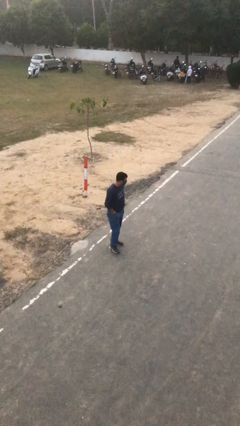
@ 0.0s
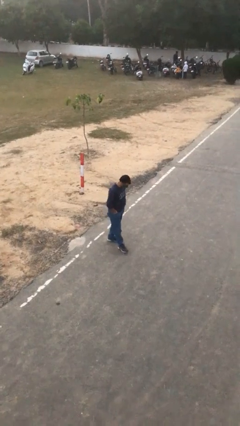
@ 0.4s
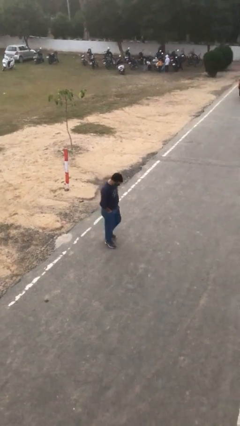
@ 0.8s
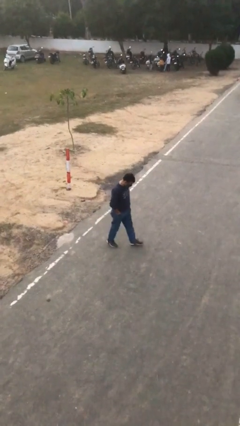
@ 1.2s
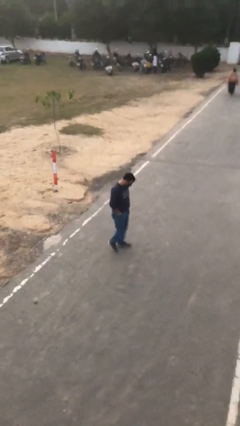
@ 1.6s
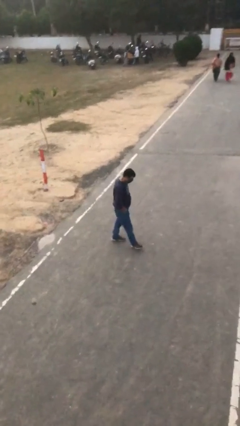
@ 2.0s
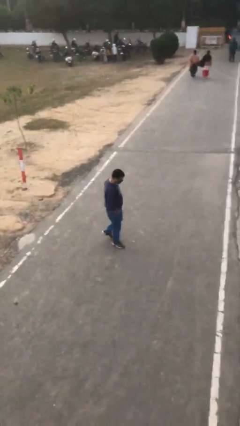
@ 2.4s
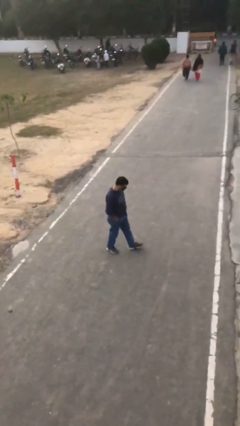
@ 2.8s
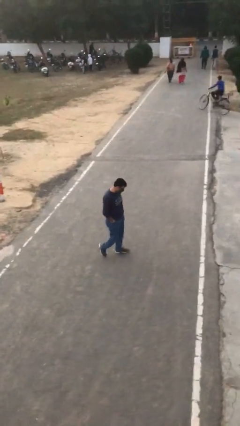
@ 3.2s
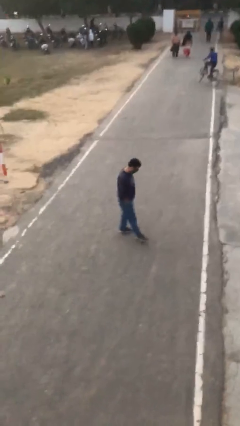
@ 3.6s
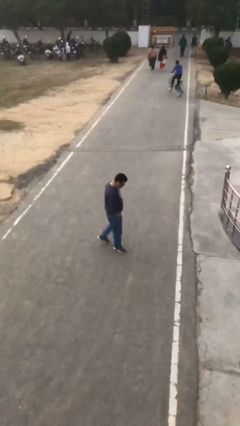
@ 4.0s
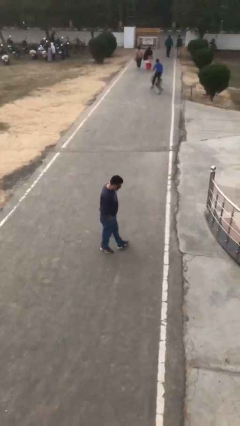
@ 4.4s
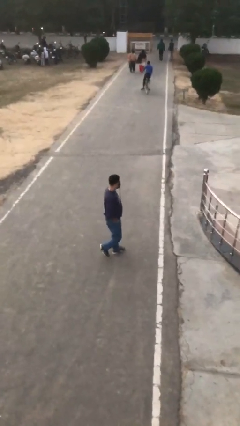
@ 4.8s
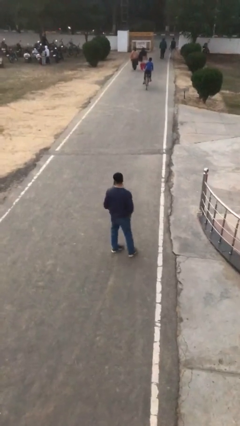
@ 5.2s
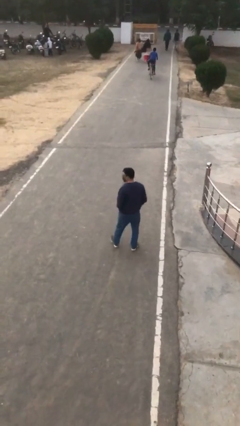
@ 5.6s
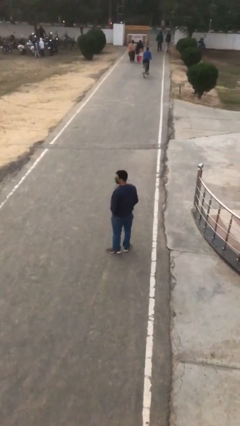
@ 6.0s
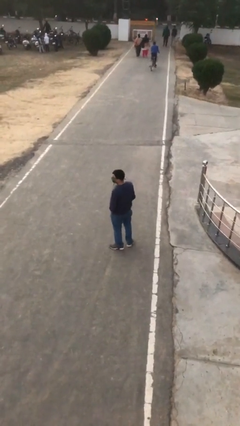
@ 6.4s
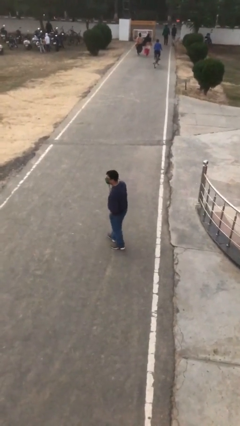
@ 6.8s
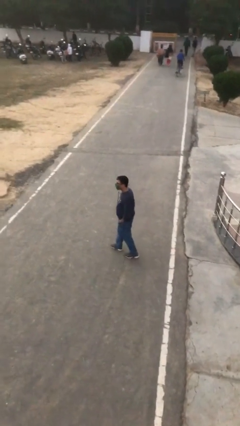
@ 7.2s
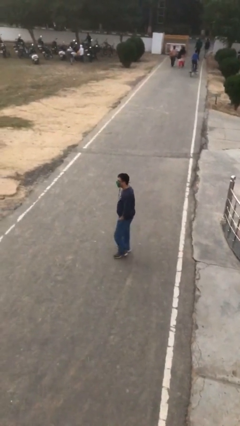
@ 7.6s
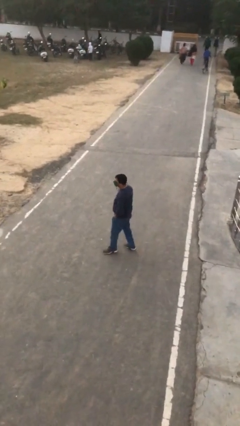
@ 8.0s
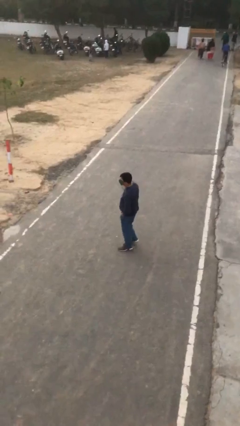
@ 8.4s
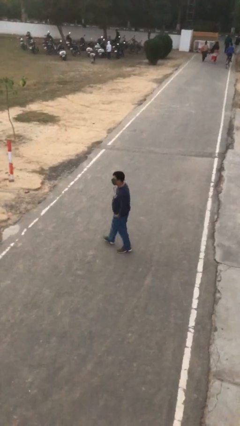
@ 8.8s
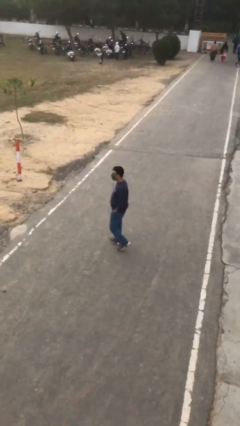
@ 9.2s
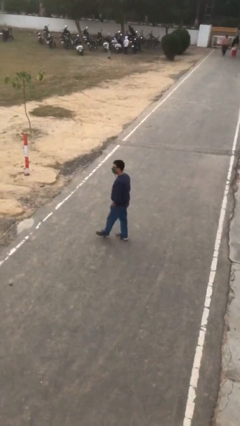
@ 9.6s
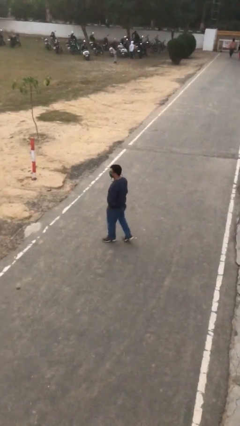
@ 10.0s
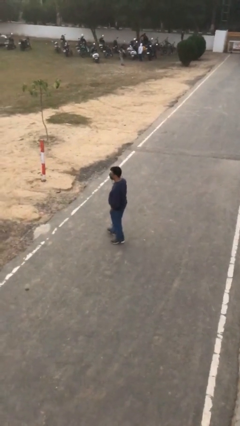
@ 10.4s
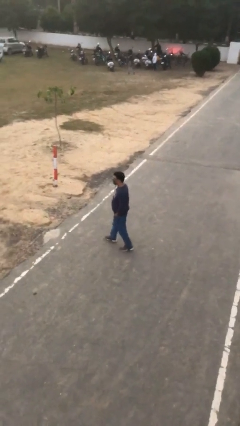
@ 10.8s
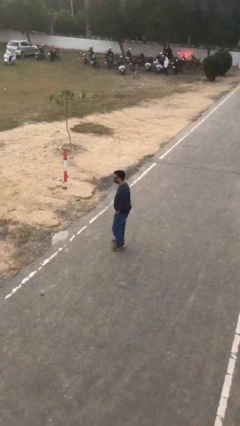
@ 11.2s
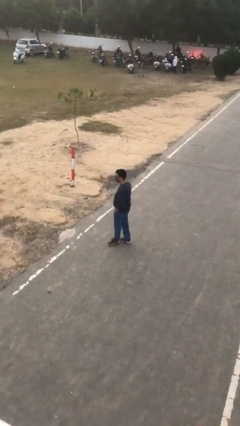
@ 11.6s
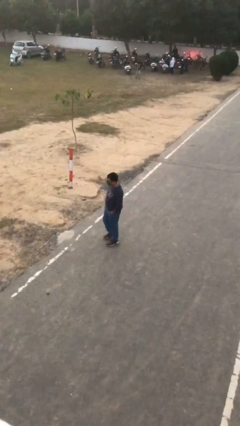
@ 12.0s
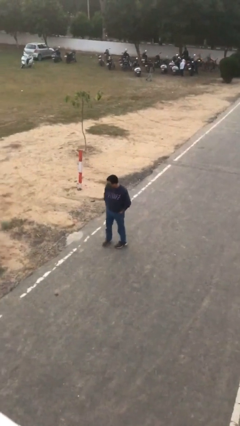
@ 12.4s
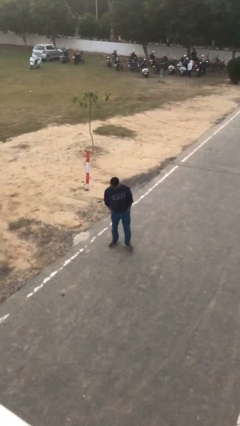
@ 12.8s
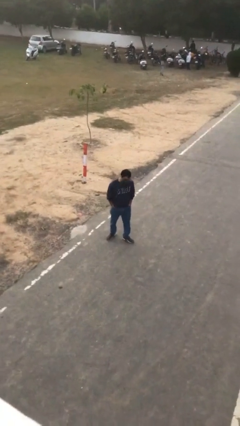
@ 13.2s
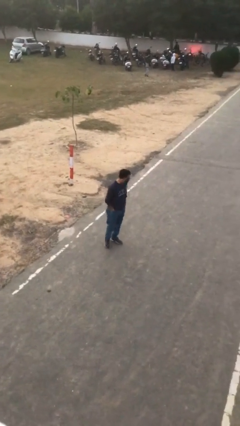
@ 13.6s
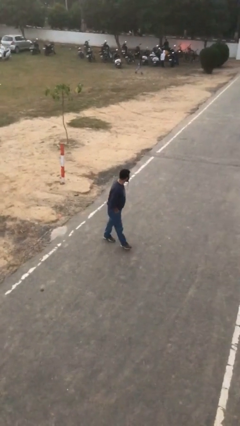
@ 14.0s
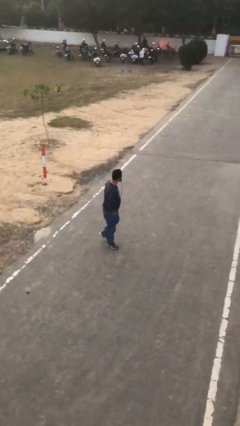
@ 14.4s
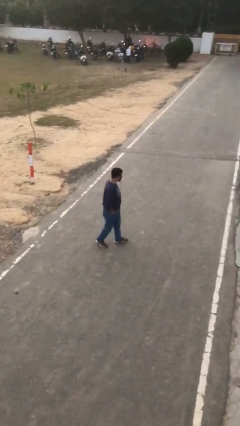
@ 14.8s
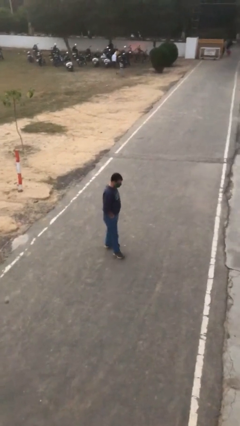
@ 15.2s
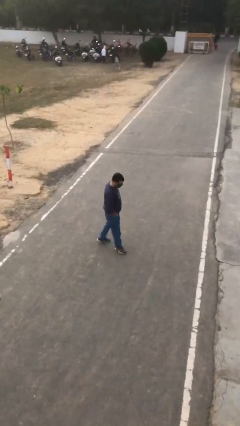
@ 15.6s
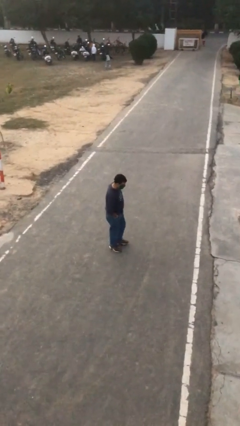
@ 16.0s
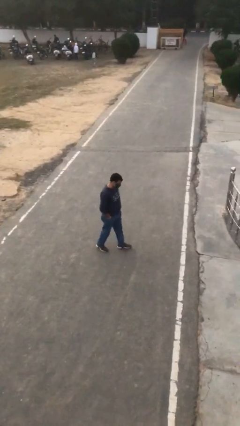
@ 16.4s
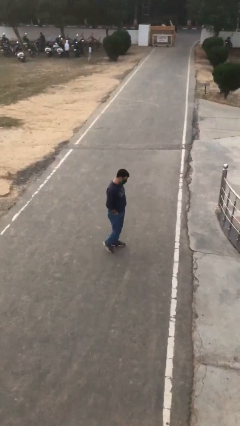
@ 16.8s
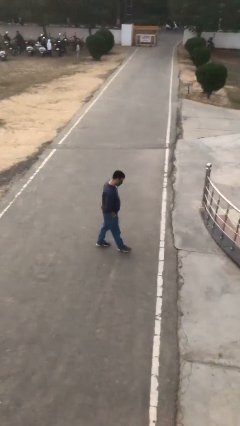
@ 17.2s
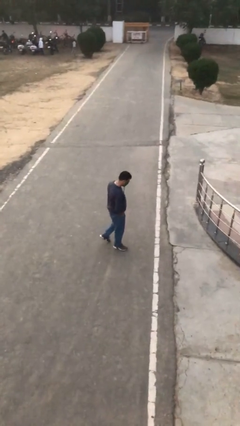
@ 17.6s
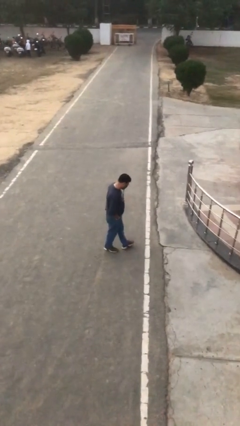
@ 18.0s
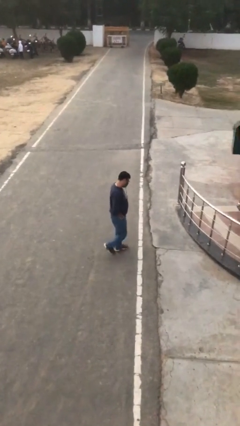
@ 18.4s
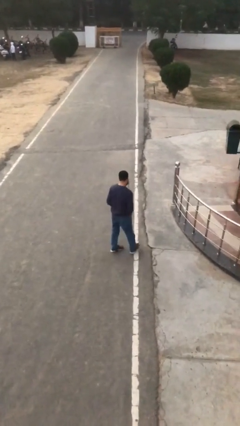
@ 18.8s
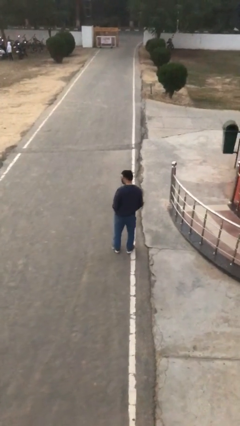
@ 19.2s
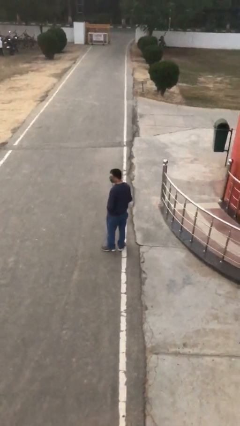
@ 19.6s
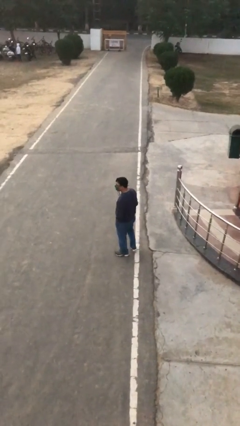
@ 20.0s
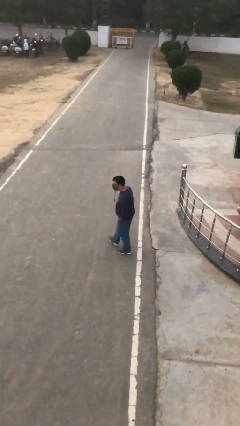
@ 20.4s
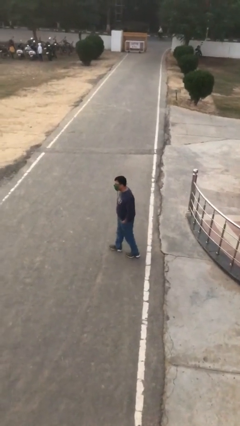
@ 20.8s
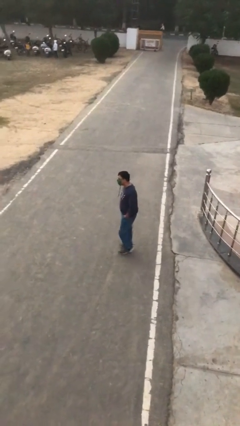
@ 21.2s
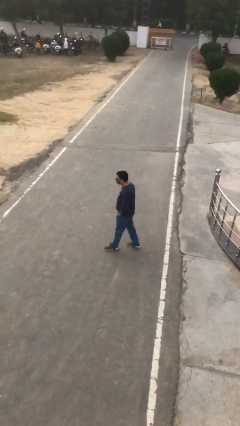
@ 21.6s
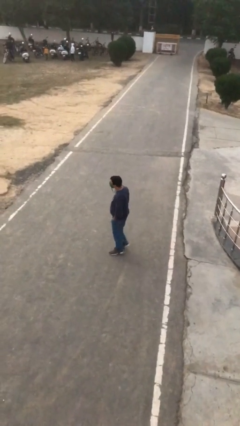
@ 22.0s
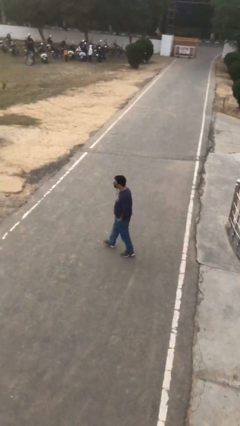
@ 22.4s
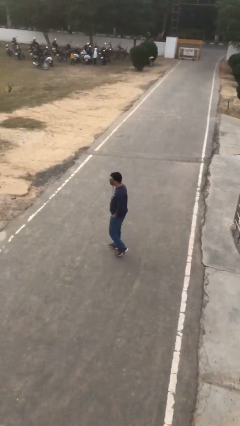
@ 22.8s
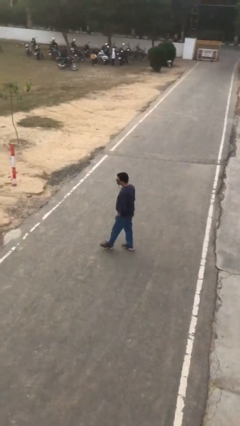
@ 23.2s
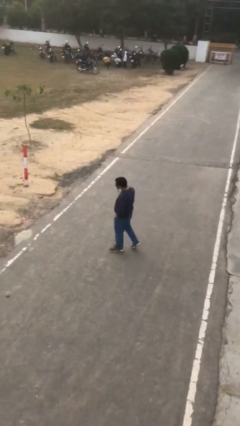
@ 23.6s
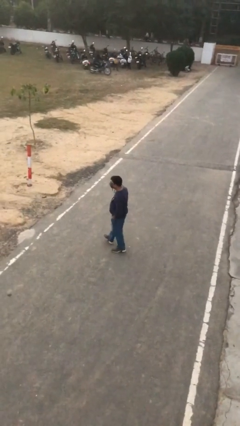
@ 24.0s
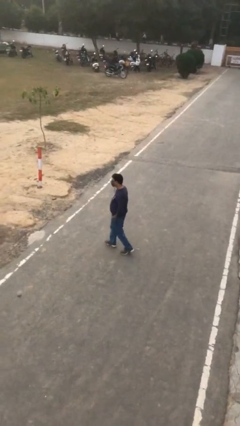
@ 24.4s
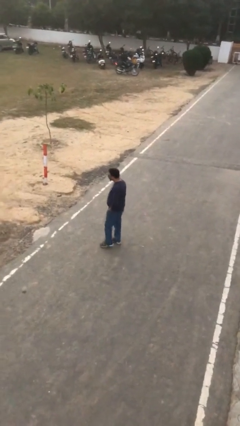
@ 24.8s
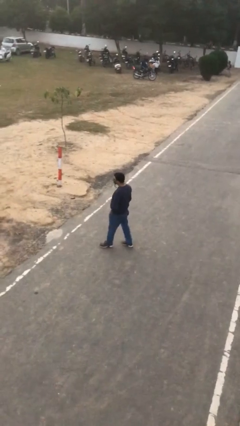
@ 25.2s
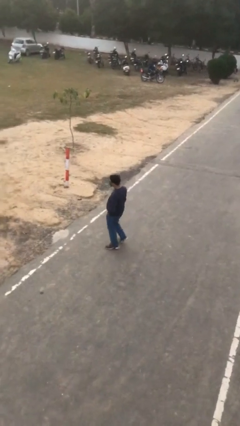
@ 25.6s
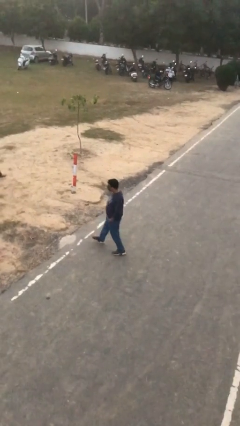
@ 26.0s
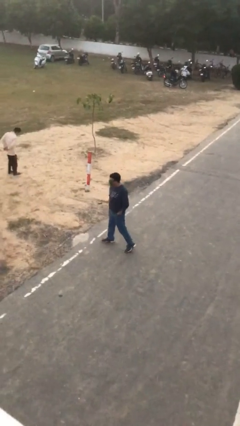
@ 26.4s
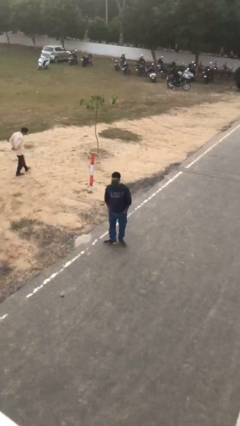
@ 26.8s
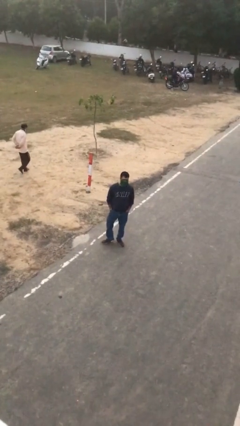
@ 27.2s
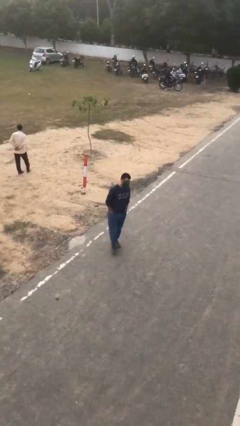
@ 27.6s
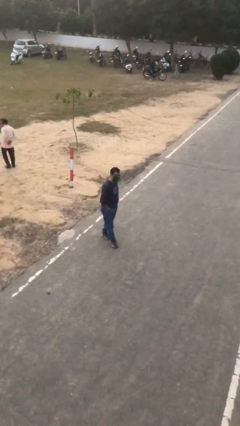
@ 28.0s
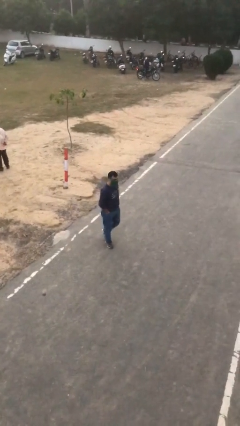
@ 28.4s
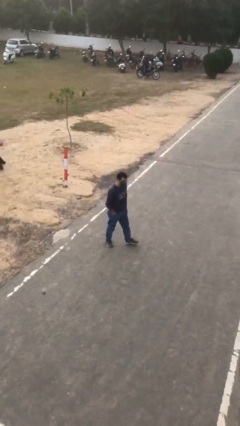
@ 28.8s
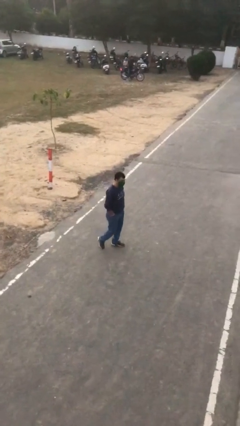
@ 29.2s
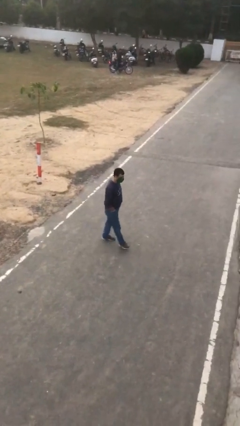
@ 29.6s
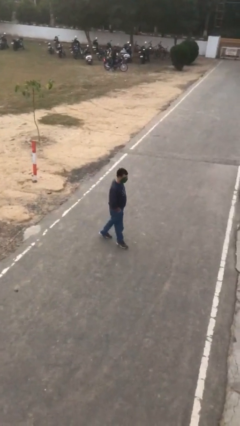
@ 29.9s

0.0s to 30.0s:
person walks

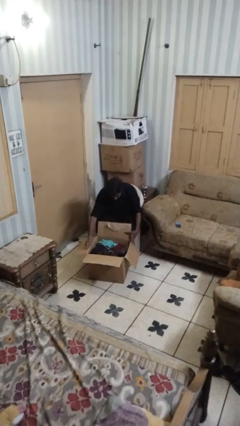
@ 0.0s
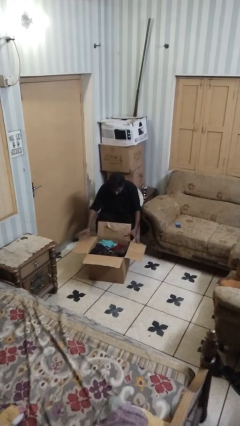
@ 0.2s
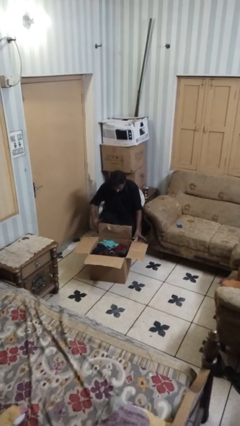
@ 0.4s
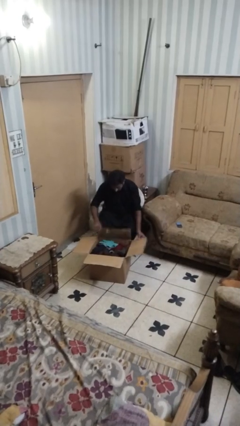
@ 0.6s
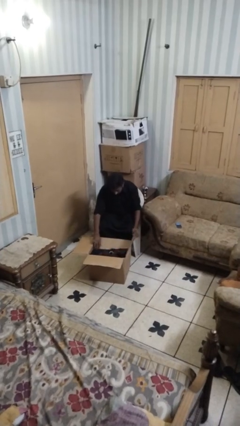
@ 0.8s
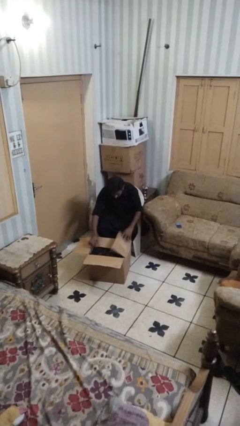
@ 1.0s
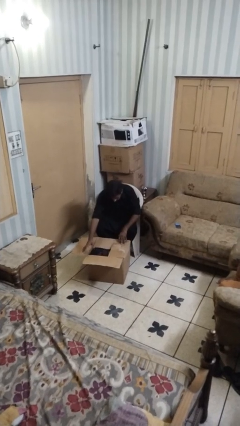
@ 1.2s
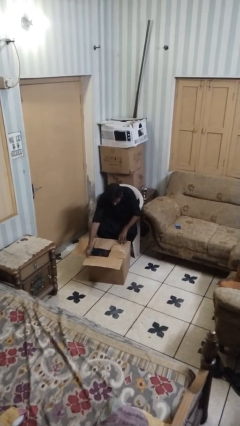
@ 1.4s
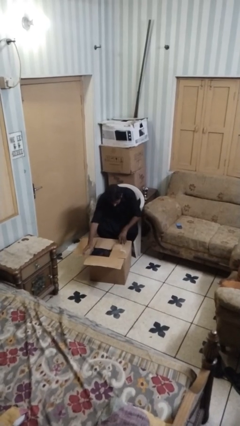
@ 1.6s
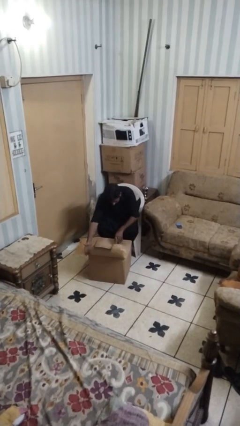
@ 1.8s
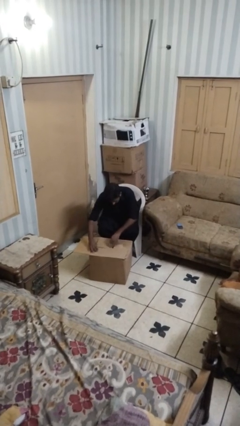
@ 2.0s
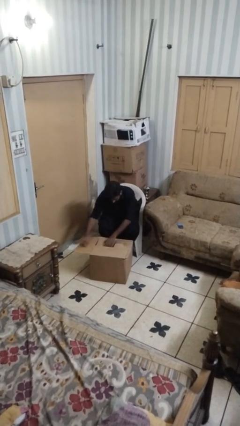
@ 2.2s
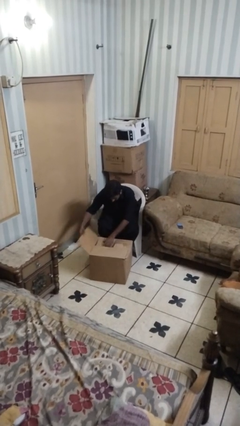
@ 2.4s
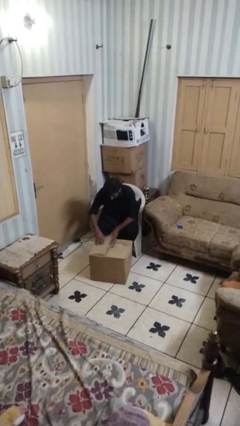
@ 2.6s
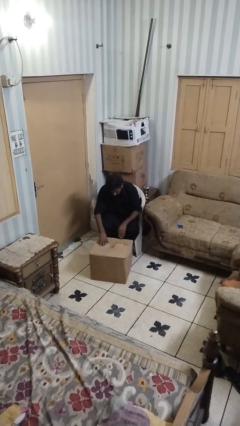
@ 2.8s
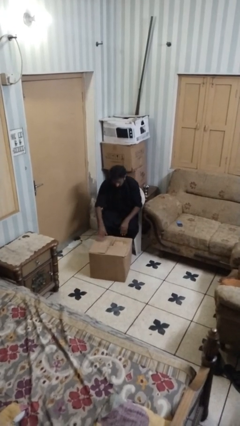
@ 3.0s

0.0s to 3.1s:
person closes box

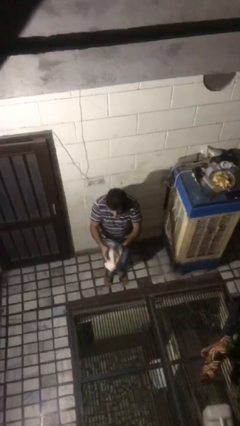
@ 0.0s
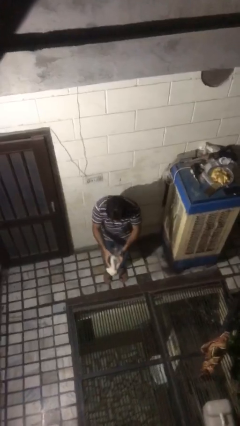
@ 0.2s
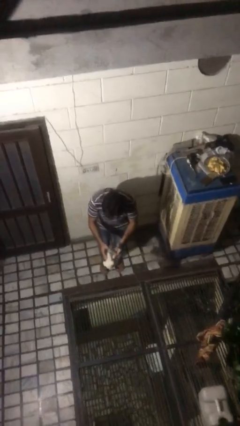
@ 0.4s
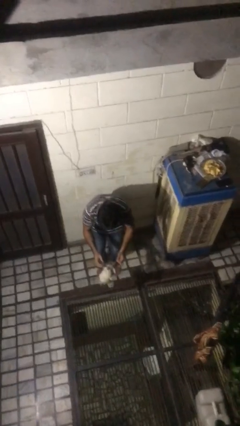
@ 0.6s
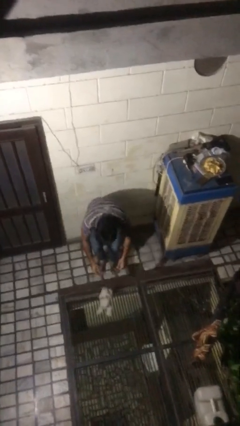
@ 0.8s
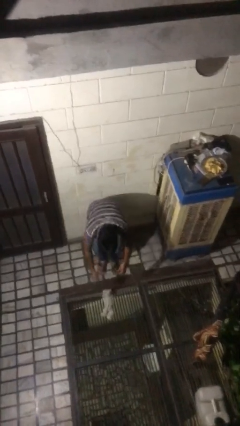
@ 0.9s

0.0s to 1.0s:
person catches dropped object
